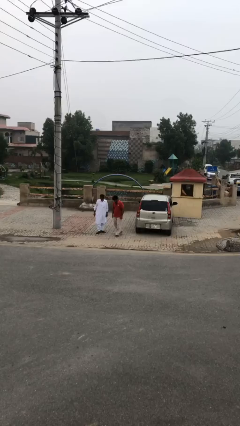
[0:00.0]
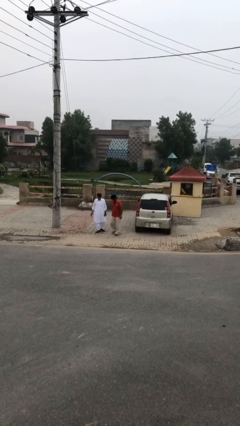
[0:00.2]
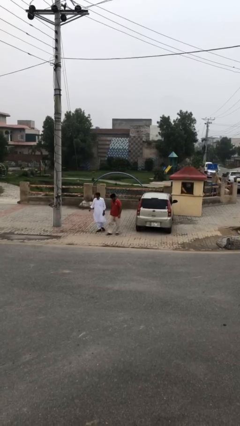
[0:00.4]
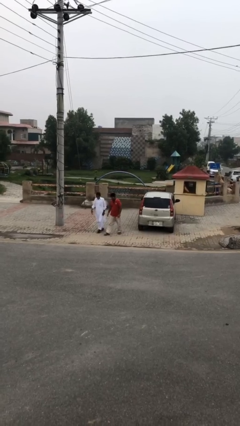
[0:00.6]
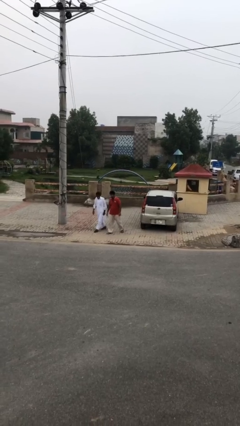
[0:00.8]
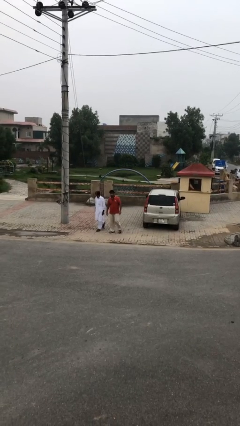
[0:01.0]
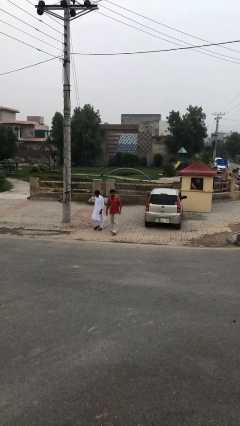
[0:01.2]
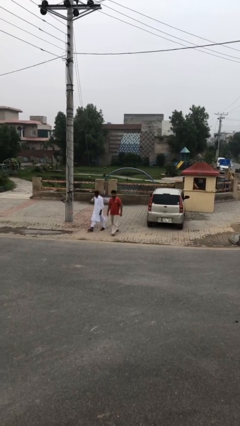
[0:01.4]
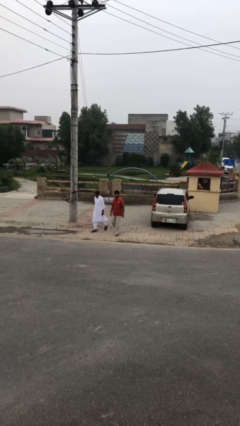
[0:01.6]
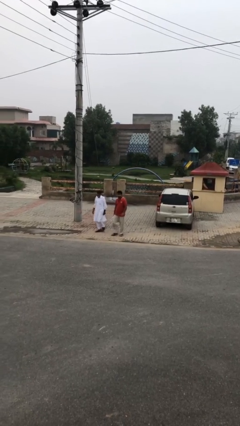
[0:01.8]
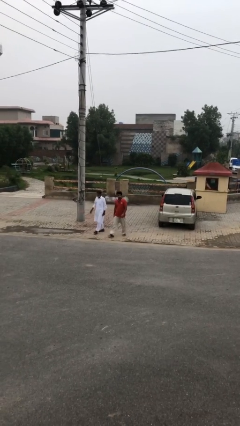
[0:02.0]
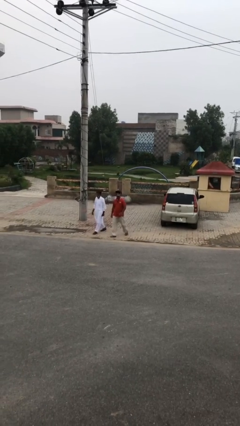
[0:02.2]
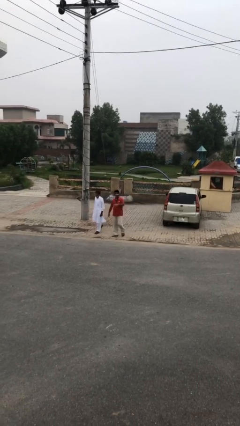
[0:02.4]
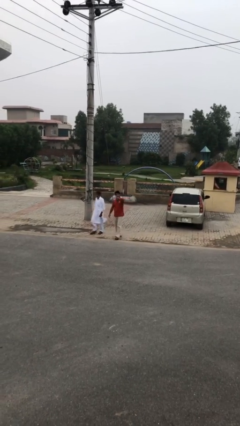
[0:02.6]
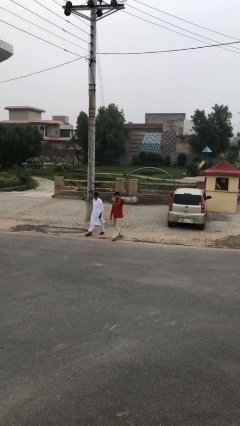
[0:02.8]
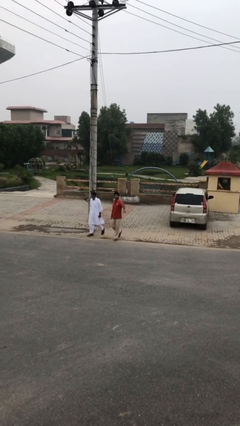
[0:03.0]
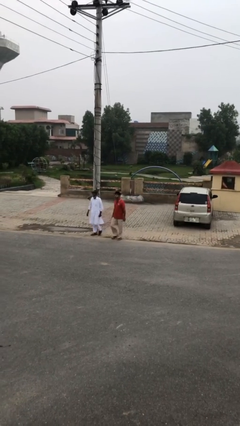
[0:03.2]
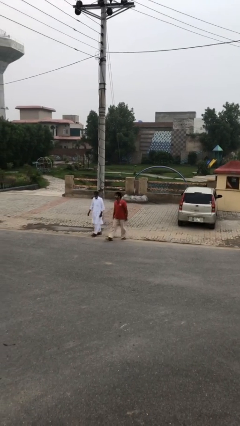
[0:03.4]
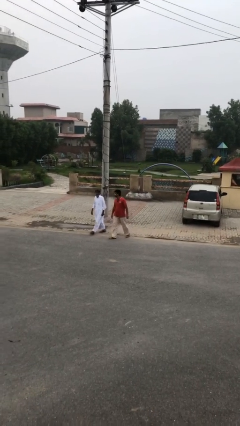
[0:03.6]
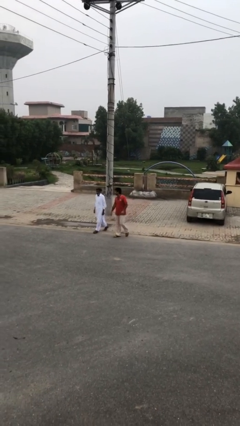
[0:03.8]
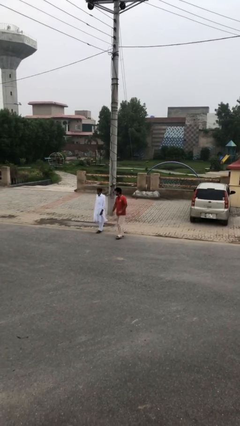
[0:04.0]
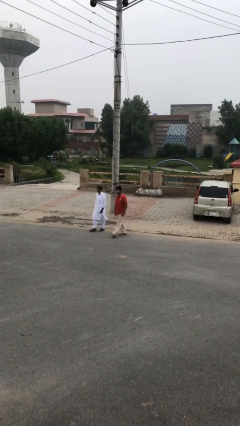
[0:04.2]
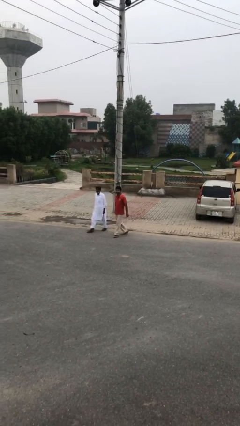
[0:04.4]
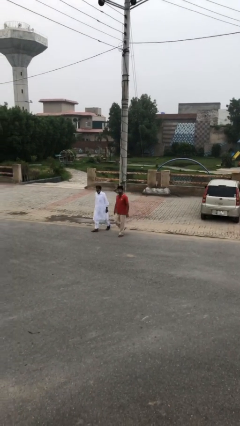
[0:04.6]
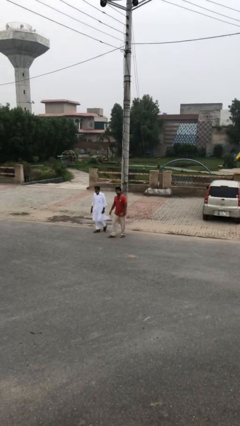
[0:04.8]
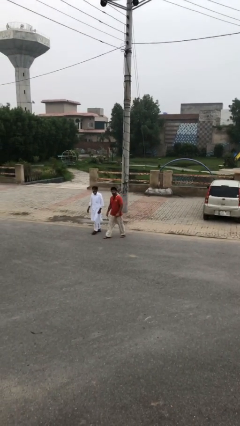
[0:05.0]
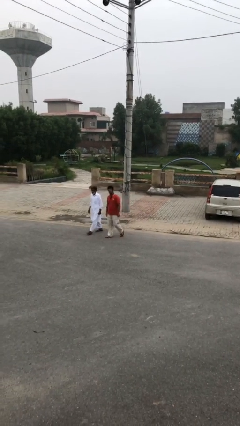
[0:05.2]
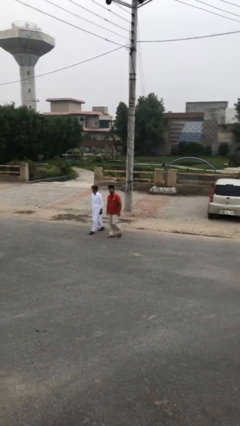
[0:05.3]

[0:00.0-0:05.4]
person talks to person

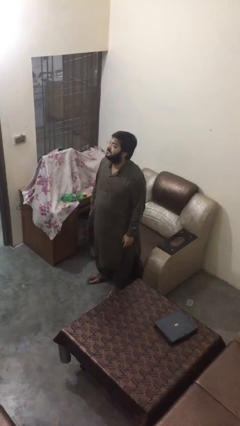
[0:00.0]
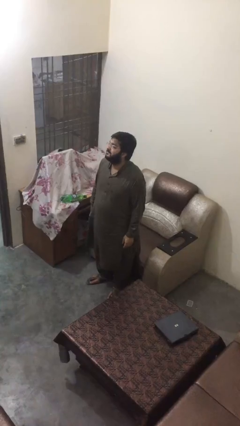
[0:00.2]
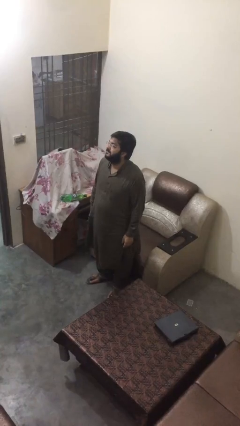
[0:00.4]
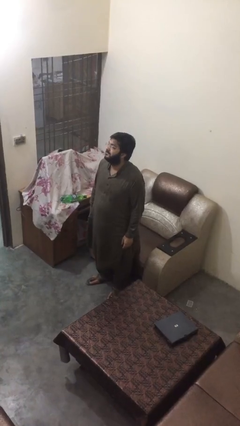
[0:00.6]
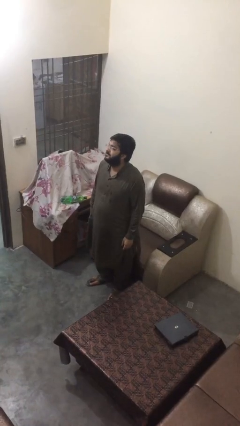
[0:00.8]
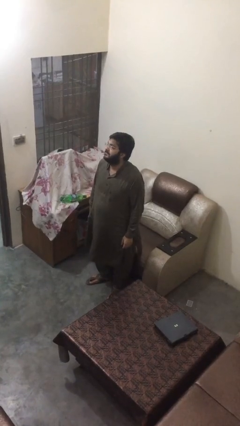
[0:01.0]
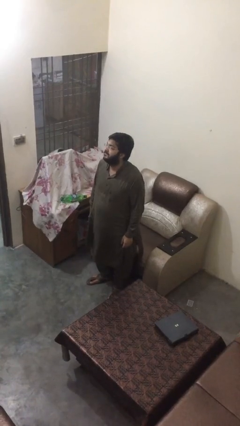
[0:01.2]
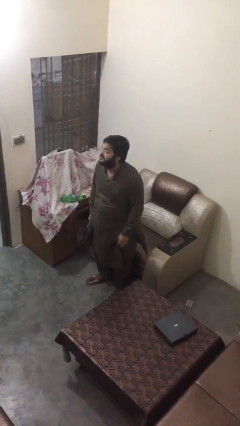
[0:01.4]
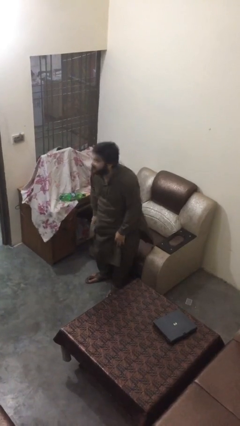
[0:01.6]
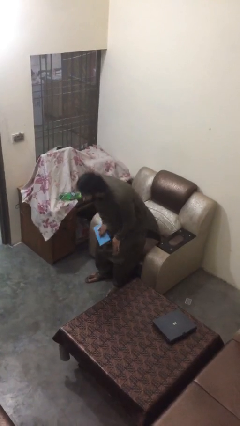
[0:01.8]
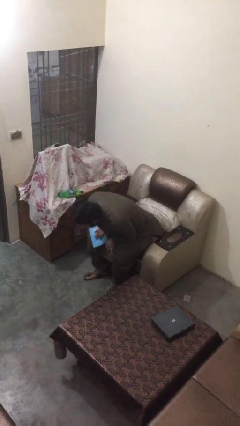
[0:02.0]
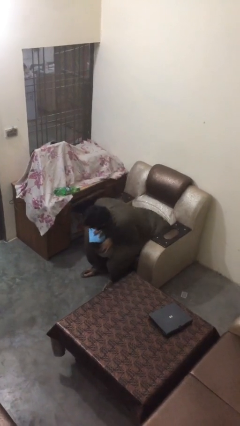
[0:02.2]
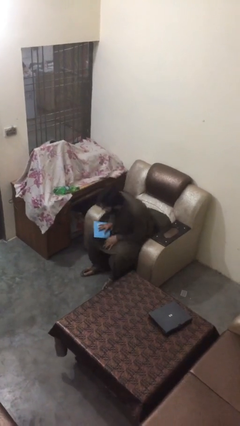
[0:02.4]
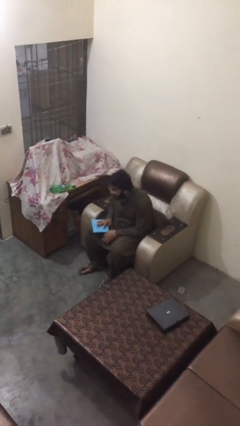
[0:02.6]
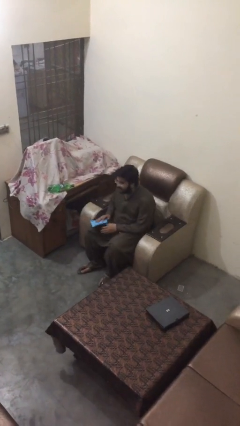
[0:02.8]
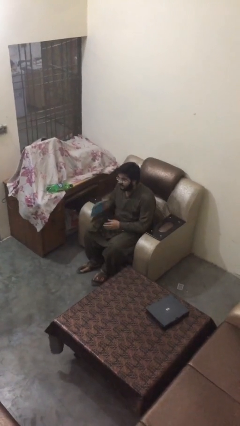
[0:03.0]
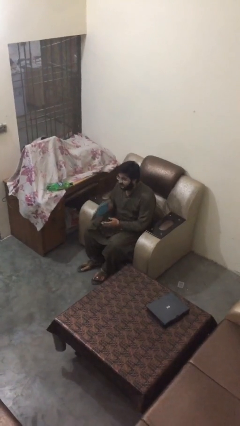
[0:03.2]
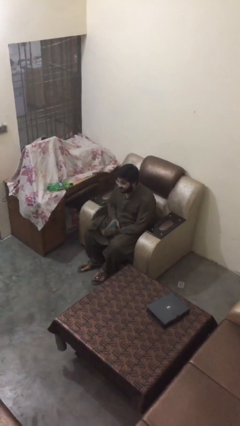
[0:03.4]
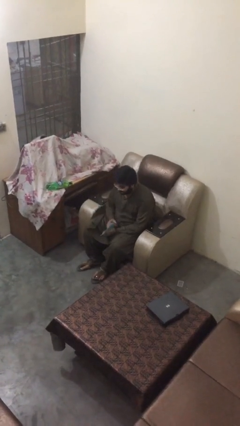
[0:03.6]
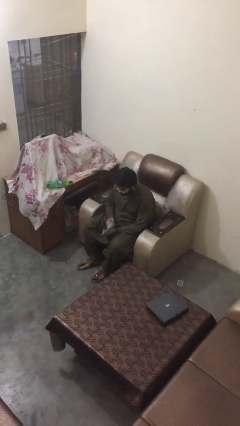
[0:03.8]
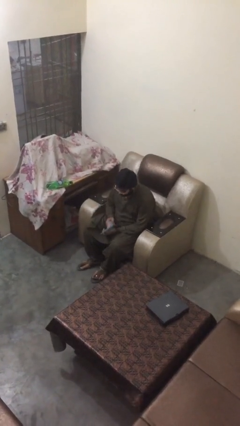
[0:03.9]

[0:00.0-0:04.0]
person sits down

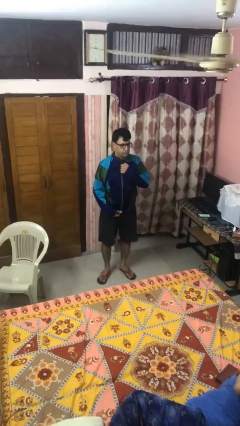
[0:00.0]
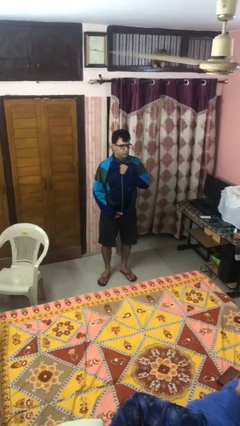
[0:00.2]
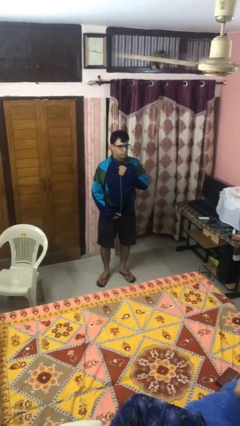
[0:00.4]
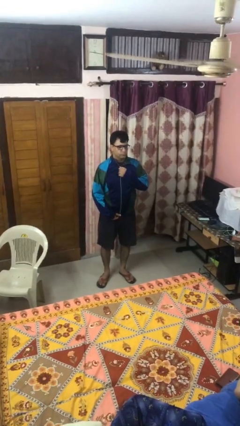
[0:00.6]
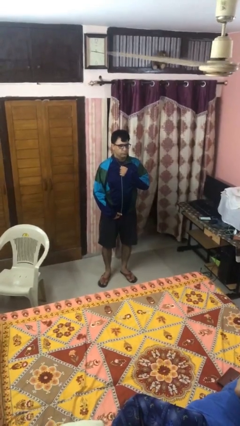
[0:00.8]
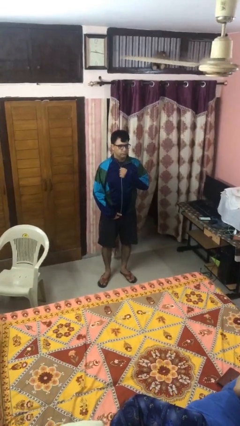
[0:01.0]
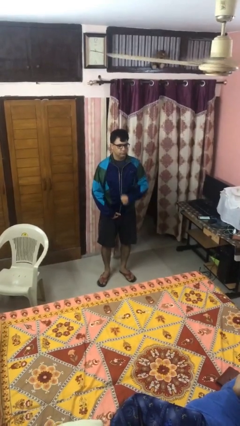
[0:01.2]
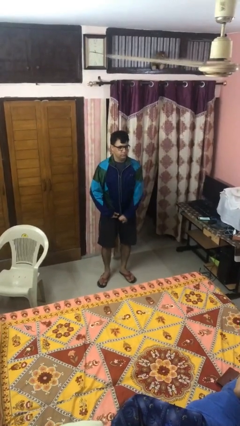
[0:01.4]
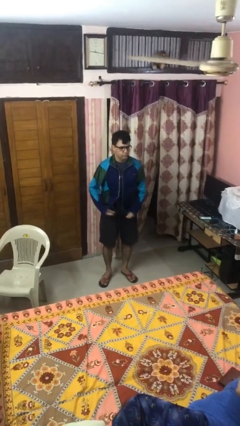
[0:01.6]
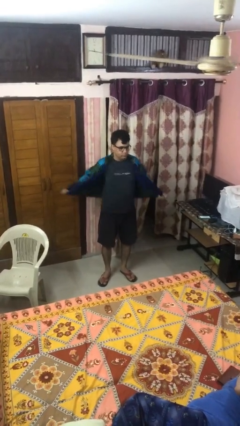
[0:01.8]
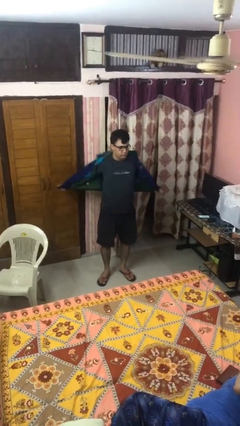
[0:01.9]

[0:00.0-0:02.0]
person unzips jacket

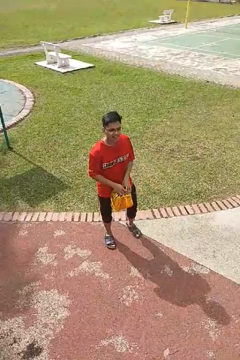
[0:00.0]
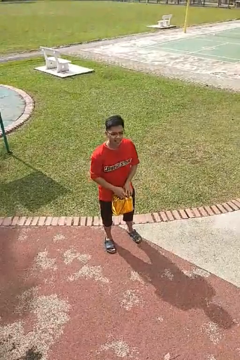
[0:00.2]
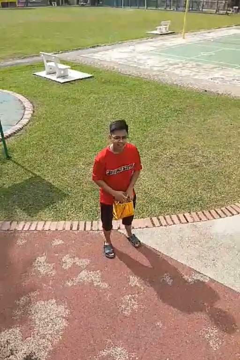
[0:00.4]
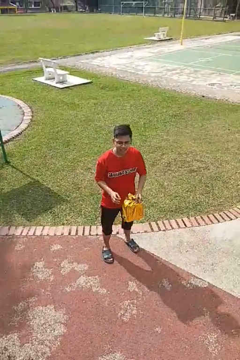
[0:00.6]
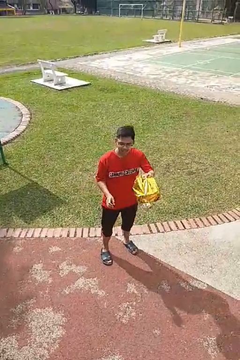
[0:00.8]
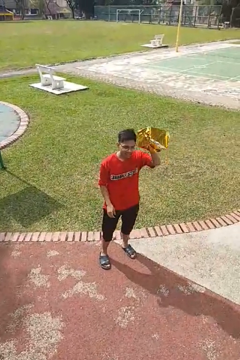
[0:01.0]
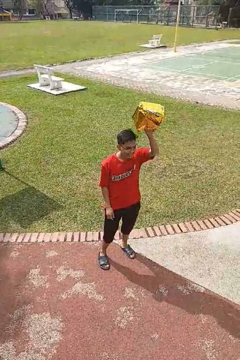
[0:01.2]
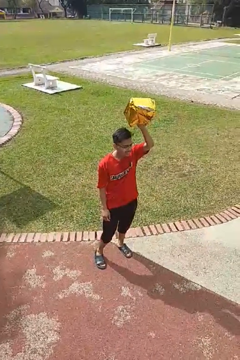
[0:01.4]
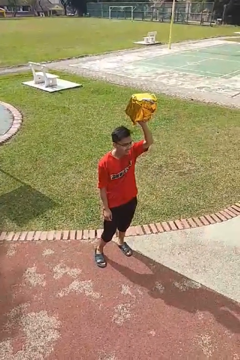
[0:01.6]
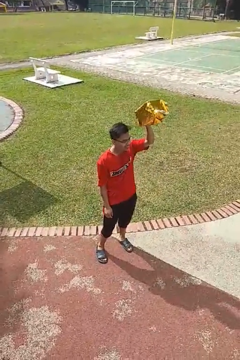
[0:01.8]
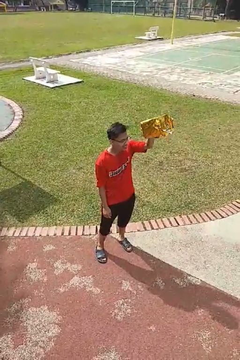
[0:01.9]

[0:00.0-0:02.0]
person holds object above head

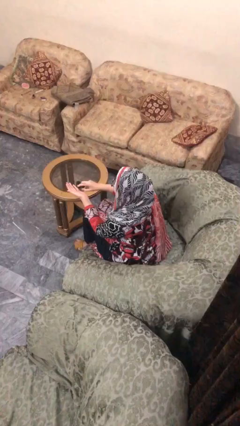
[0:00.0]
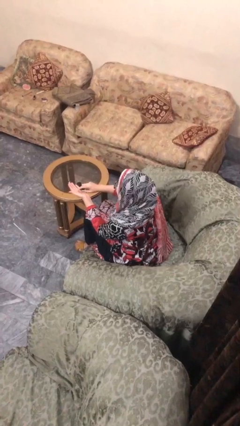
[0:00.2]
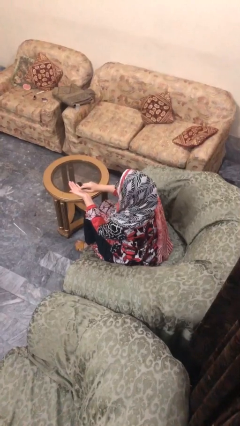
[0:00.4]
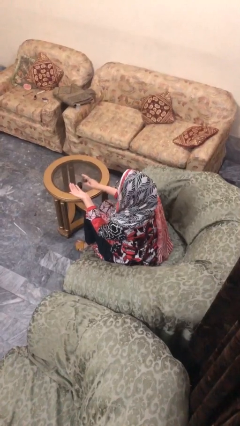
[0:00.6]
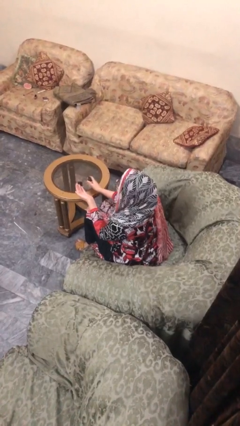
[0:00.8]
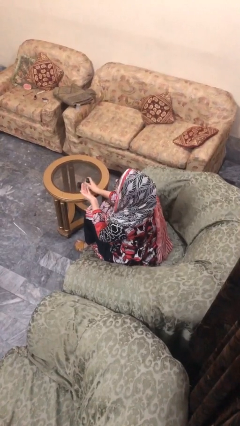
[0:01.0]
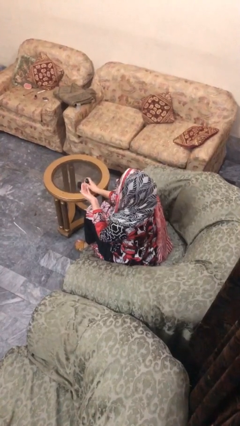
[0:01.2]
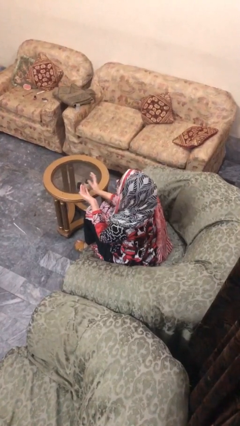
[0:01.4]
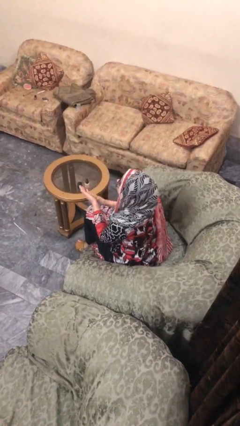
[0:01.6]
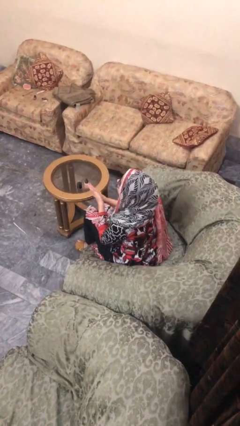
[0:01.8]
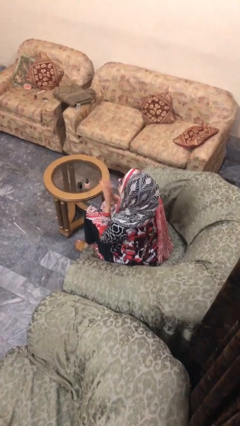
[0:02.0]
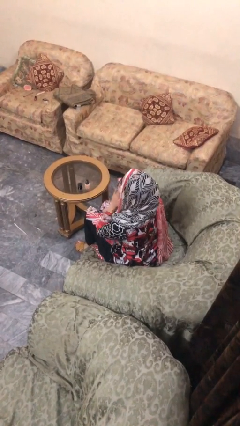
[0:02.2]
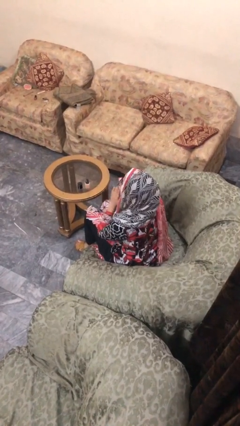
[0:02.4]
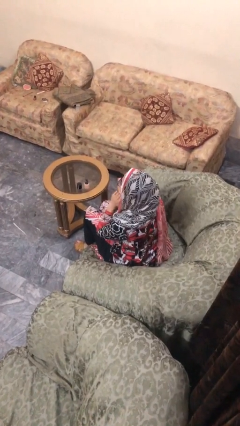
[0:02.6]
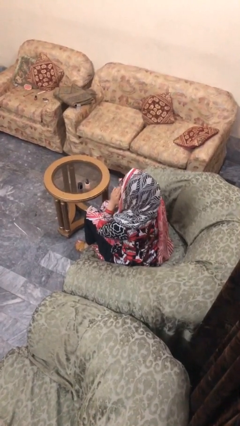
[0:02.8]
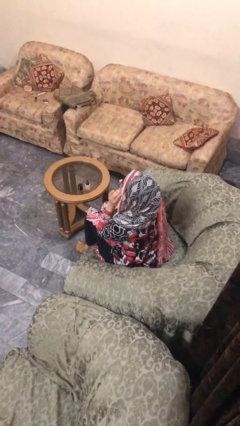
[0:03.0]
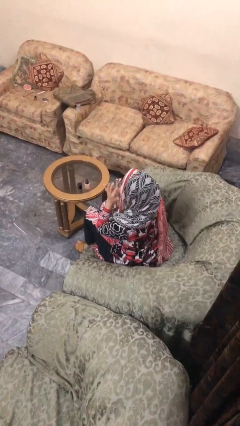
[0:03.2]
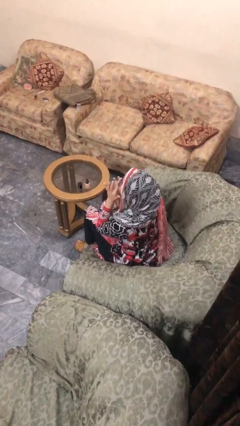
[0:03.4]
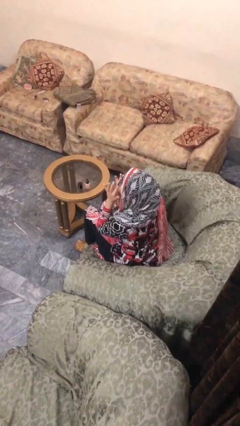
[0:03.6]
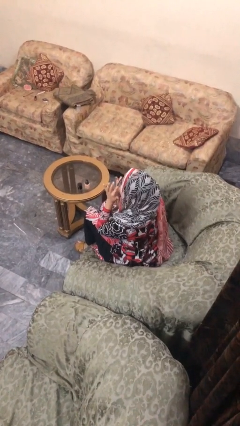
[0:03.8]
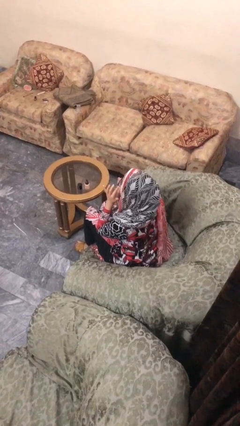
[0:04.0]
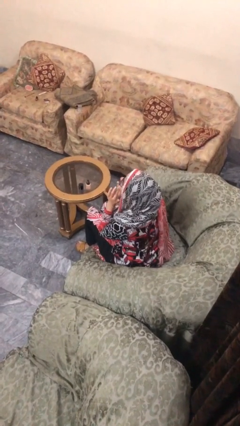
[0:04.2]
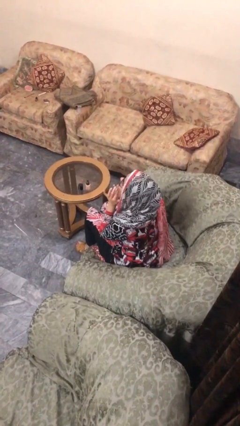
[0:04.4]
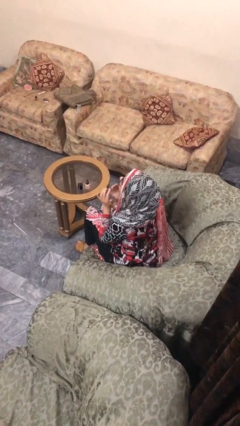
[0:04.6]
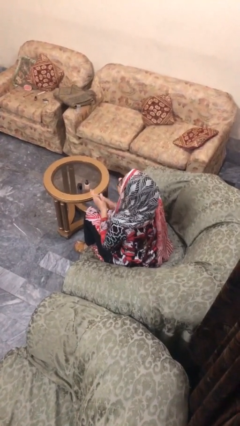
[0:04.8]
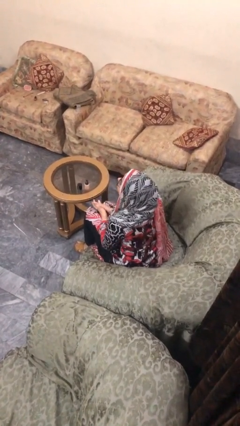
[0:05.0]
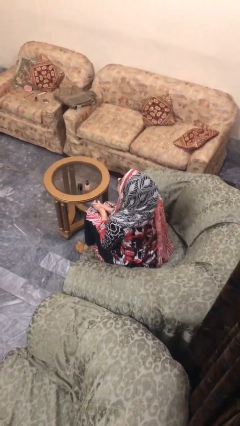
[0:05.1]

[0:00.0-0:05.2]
person applies foundation makeup
